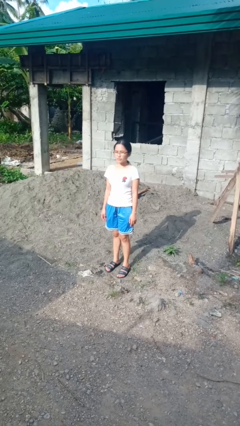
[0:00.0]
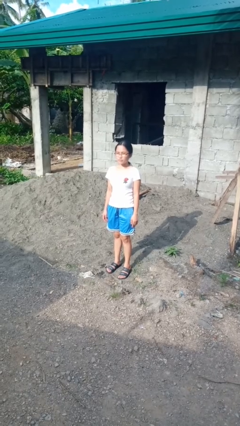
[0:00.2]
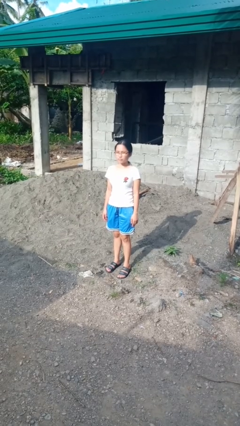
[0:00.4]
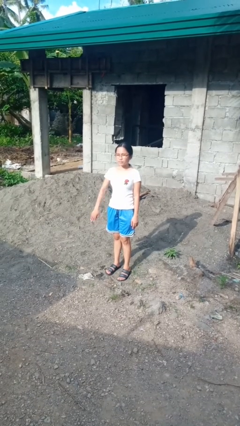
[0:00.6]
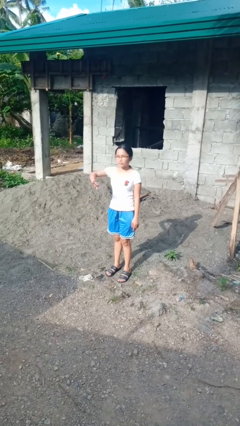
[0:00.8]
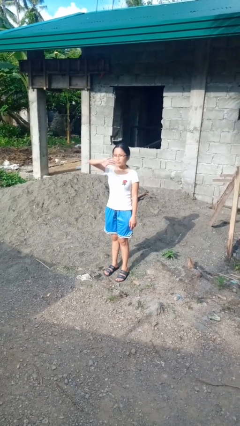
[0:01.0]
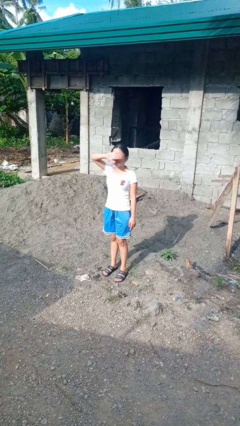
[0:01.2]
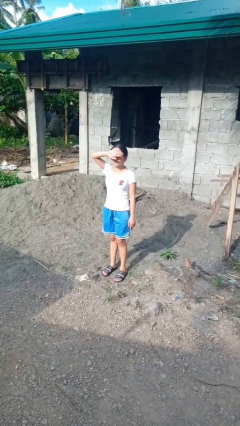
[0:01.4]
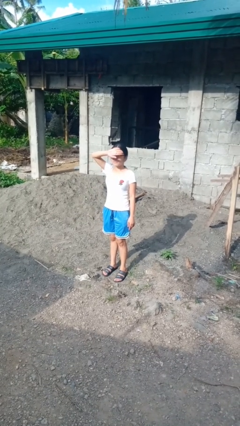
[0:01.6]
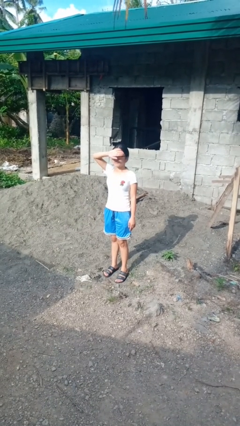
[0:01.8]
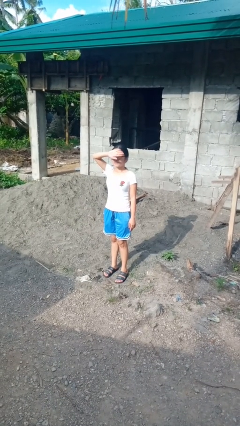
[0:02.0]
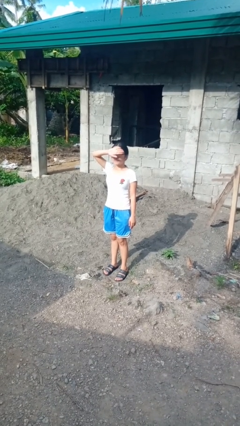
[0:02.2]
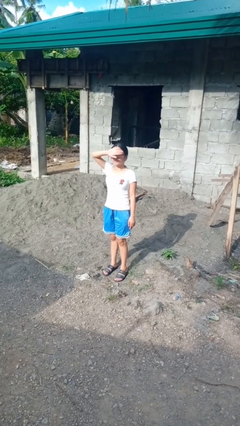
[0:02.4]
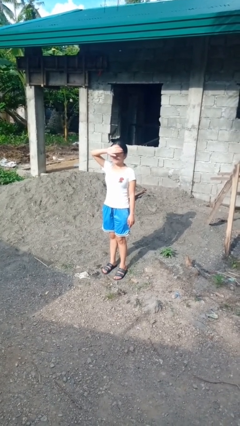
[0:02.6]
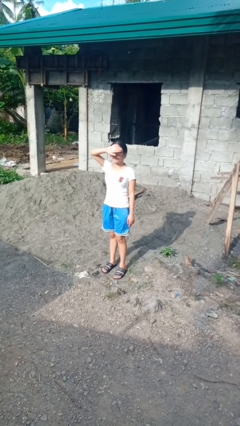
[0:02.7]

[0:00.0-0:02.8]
person shades eyes

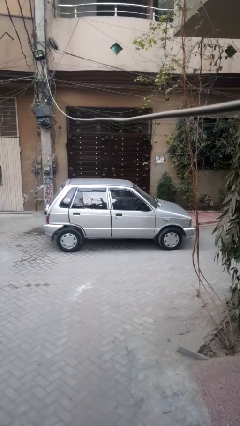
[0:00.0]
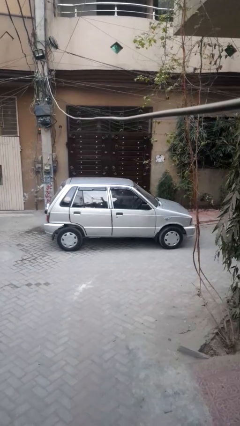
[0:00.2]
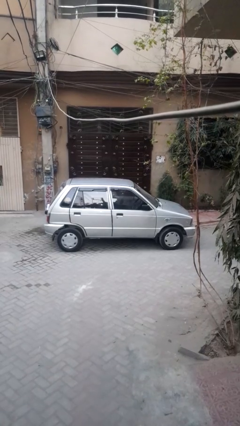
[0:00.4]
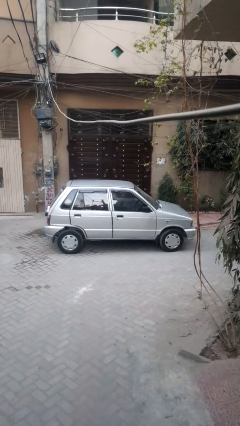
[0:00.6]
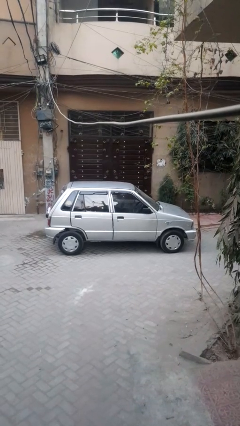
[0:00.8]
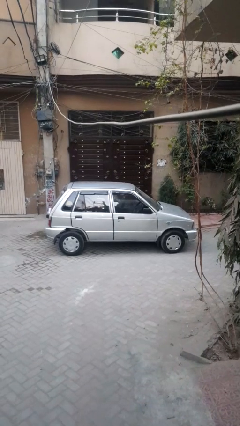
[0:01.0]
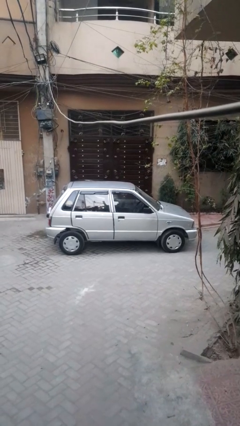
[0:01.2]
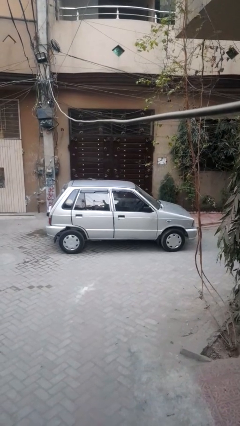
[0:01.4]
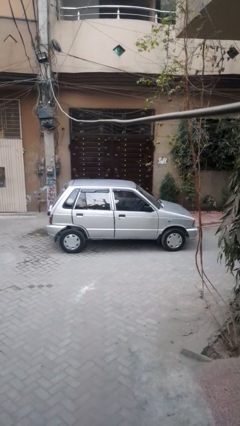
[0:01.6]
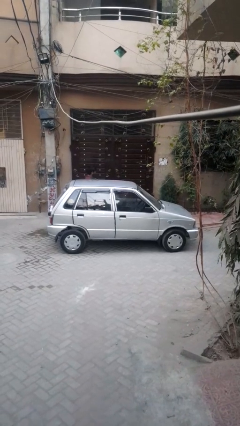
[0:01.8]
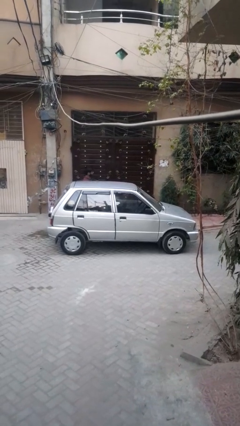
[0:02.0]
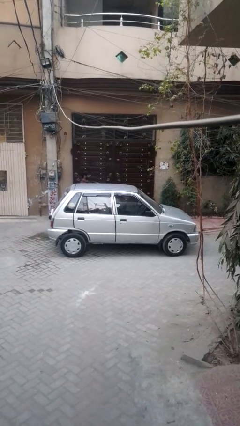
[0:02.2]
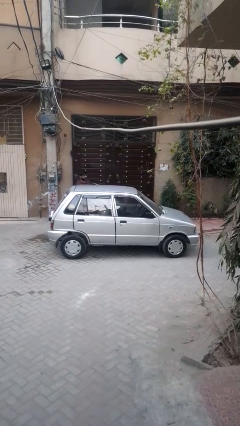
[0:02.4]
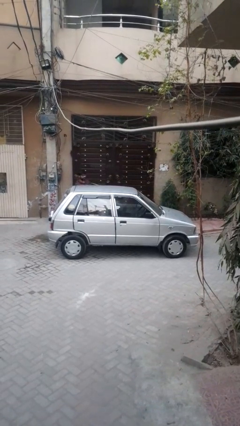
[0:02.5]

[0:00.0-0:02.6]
car drops off person

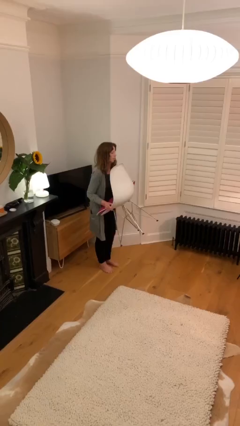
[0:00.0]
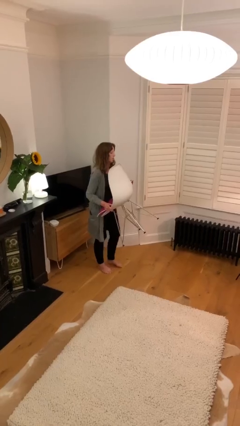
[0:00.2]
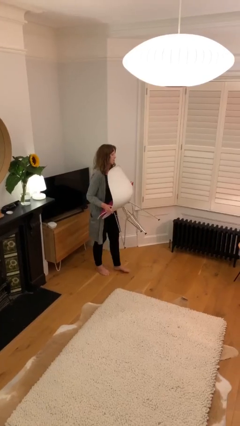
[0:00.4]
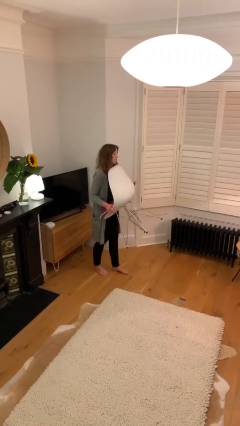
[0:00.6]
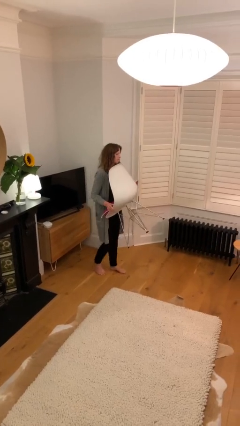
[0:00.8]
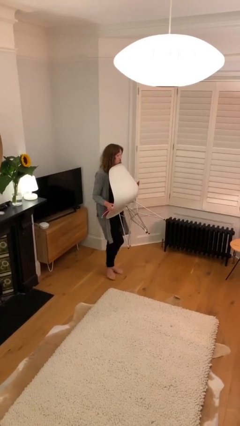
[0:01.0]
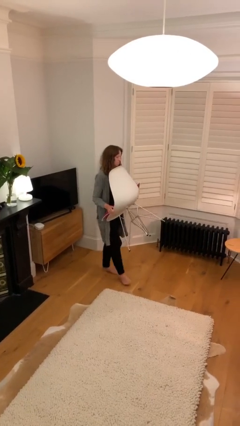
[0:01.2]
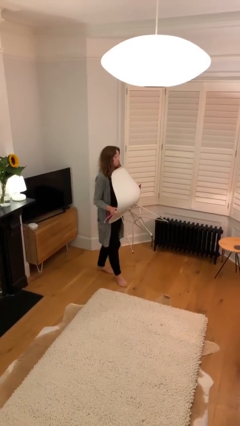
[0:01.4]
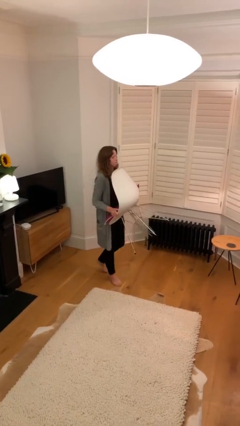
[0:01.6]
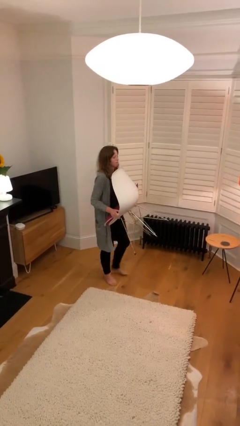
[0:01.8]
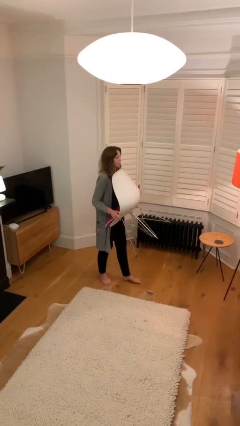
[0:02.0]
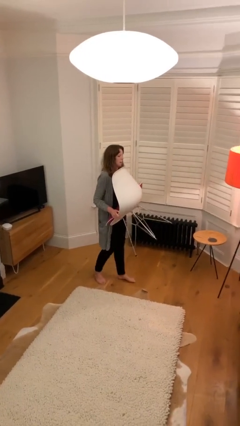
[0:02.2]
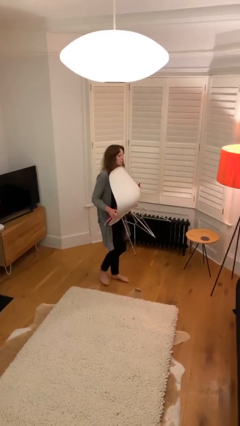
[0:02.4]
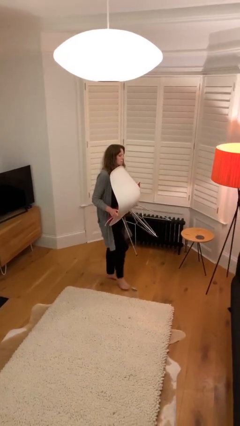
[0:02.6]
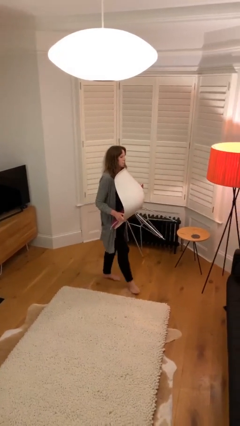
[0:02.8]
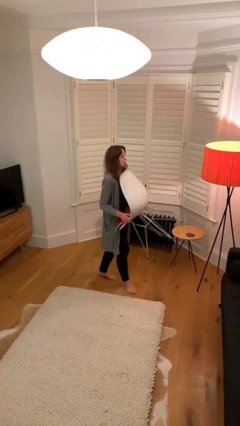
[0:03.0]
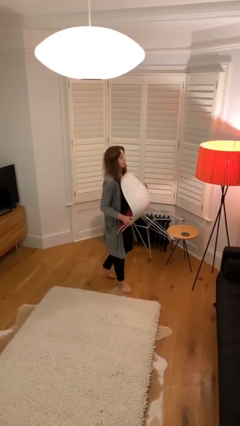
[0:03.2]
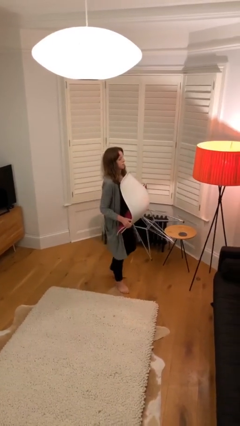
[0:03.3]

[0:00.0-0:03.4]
person carries heavy object

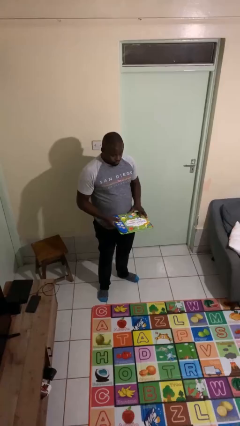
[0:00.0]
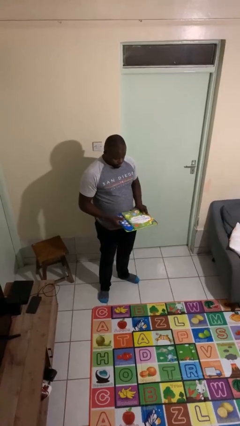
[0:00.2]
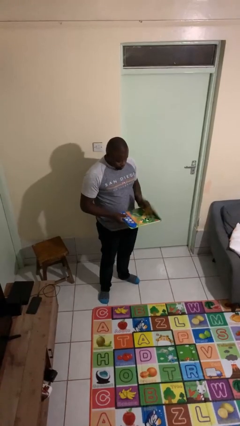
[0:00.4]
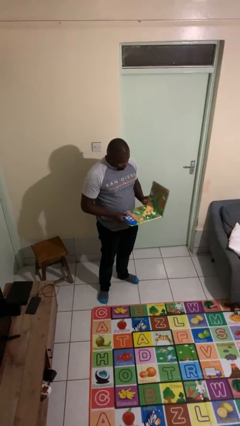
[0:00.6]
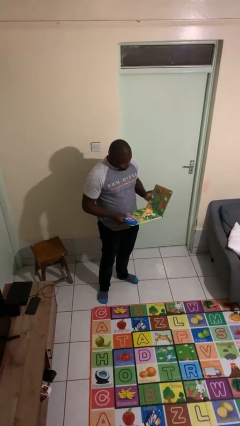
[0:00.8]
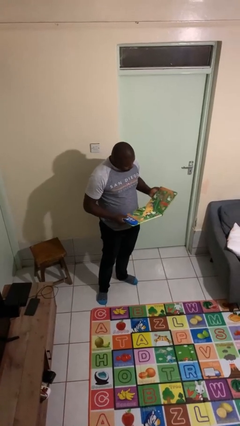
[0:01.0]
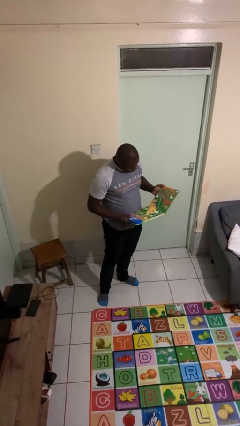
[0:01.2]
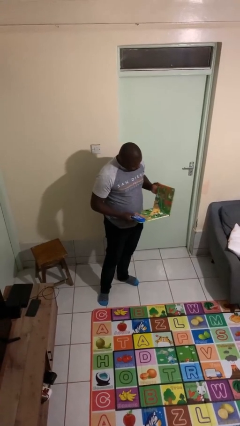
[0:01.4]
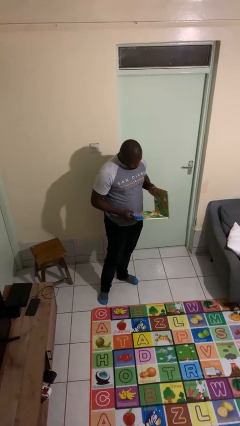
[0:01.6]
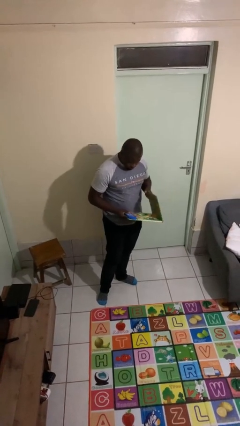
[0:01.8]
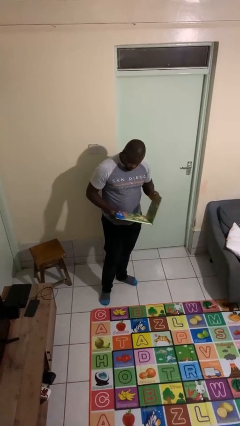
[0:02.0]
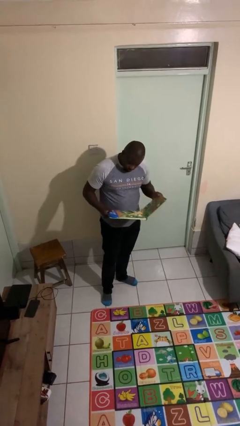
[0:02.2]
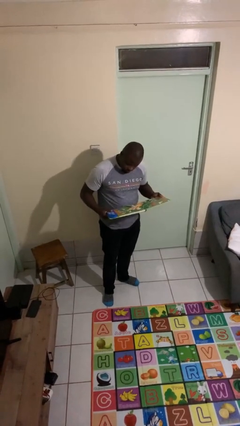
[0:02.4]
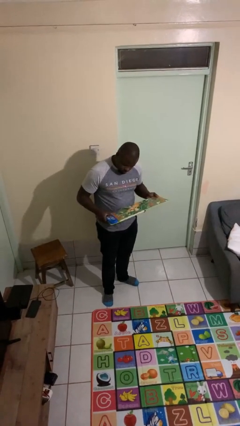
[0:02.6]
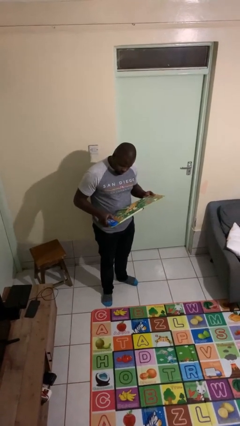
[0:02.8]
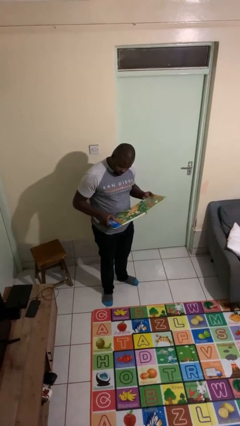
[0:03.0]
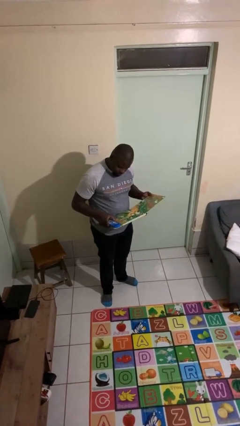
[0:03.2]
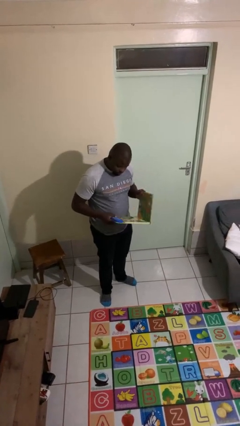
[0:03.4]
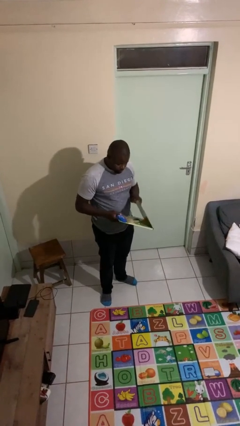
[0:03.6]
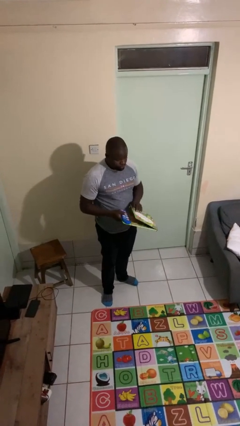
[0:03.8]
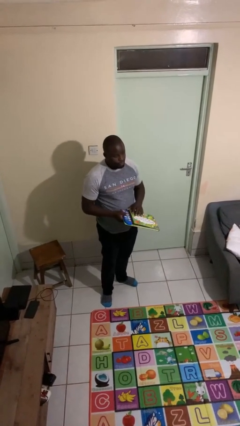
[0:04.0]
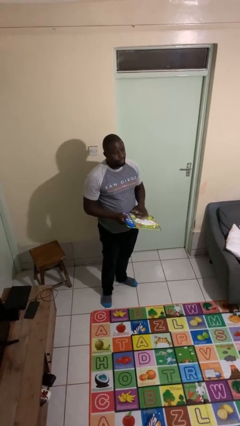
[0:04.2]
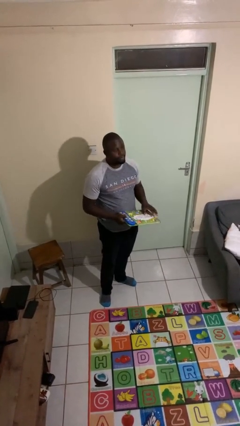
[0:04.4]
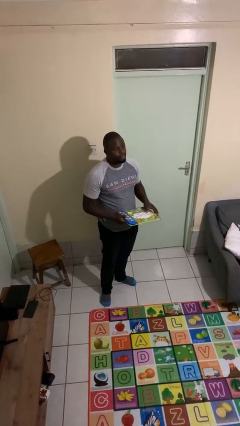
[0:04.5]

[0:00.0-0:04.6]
person reads book

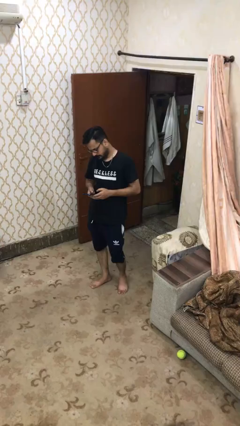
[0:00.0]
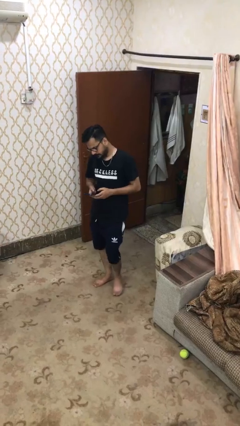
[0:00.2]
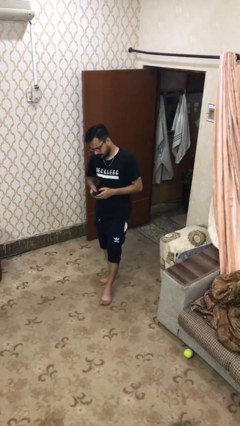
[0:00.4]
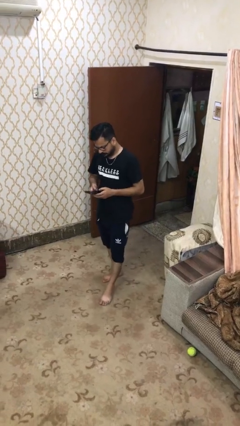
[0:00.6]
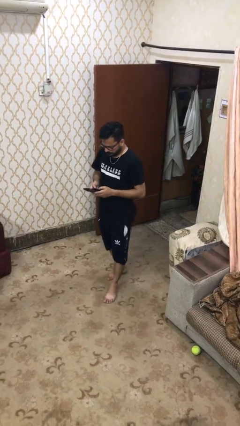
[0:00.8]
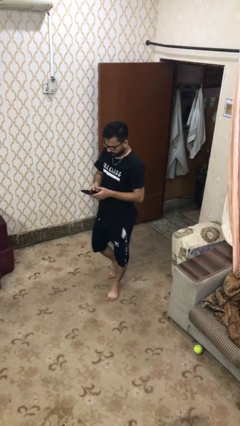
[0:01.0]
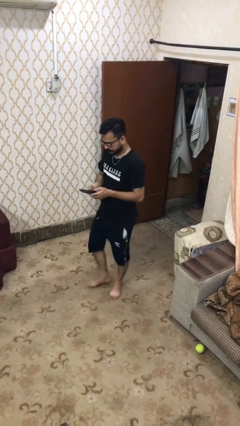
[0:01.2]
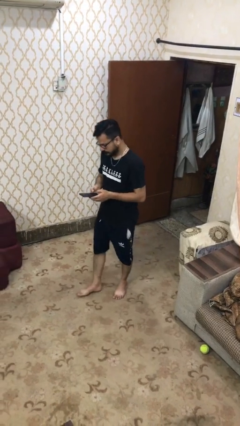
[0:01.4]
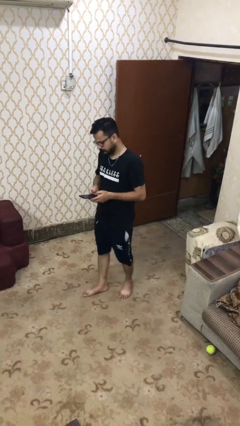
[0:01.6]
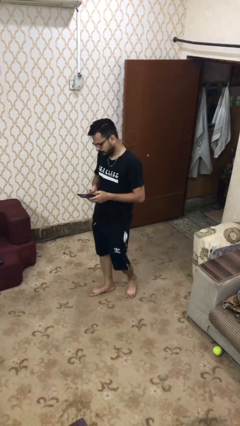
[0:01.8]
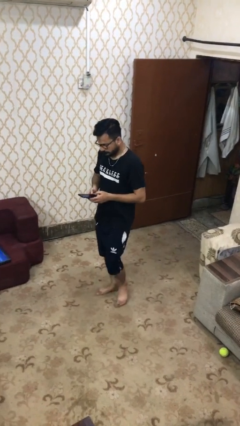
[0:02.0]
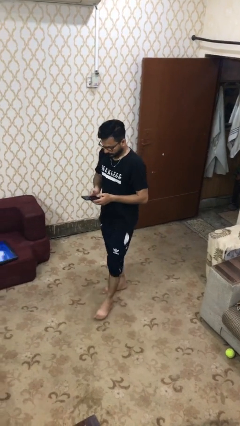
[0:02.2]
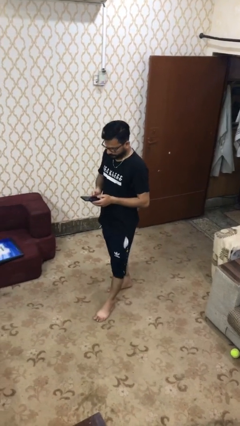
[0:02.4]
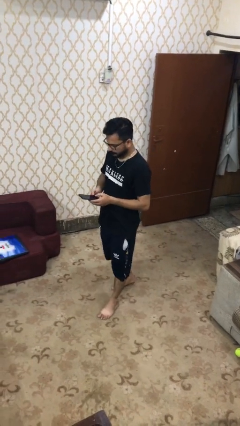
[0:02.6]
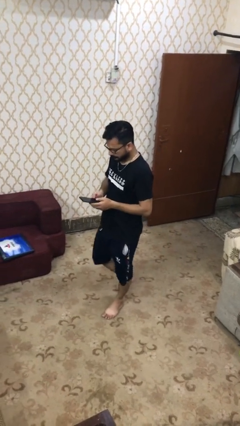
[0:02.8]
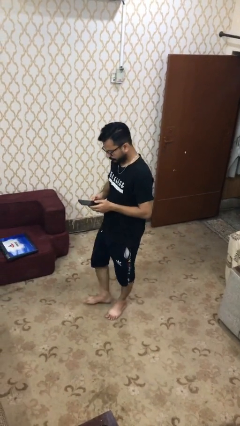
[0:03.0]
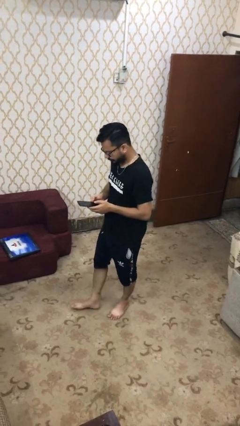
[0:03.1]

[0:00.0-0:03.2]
person texts on phone

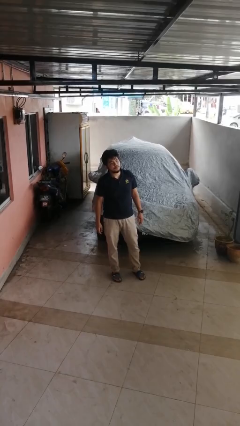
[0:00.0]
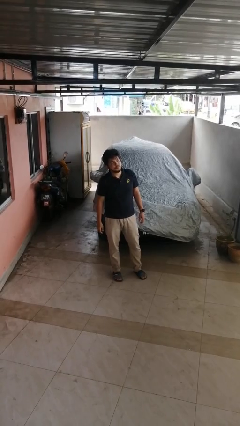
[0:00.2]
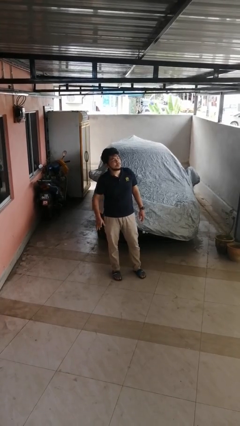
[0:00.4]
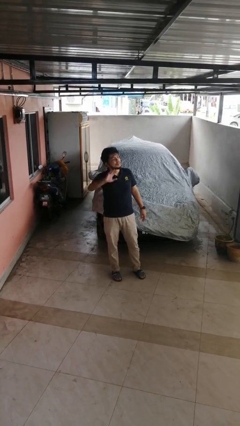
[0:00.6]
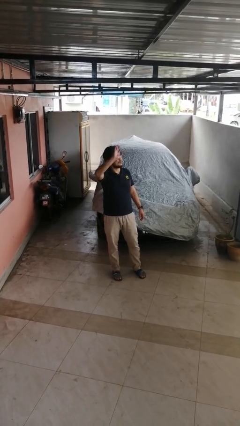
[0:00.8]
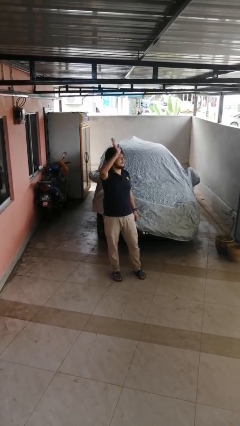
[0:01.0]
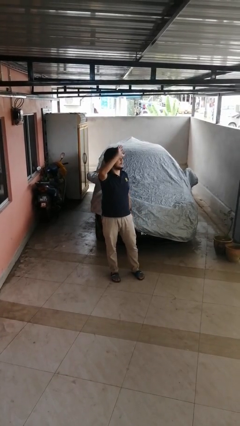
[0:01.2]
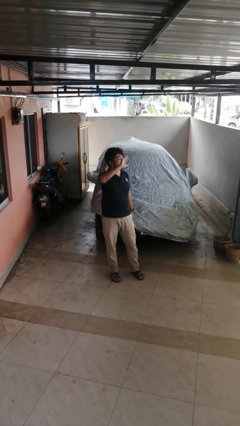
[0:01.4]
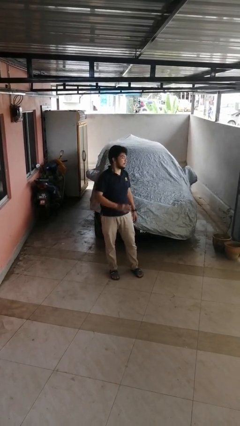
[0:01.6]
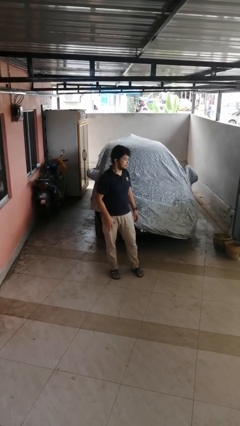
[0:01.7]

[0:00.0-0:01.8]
person waves at person
